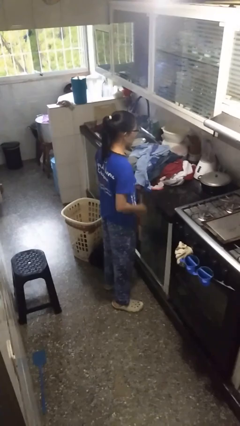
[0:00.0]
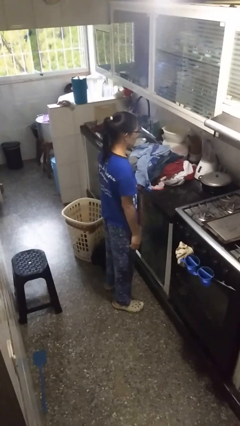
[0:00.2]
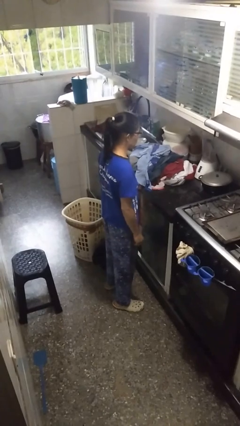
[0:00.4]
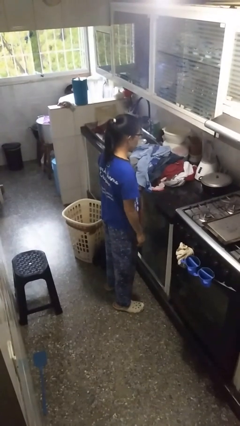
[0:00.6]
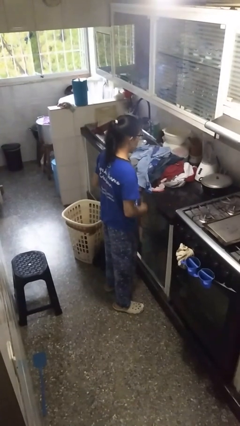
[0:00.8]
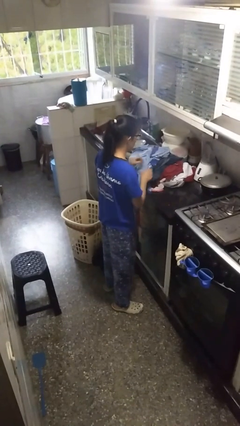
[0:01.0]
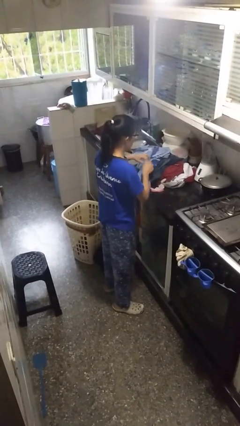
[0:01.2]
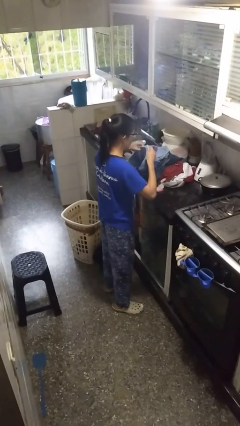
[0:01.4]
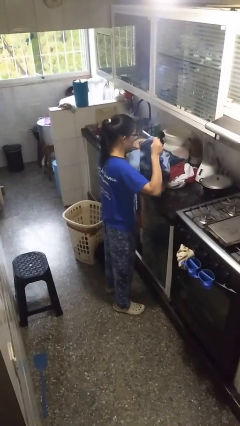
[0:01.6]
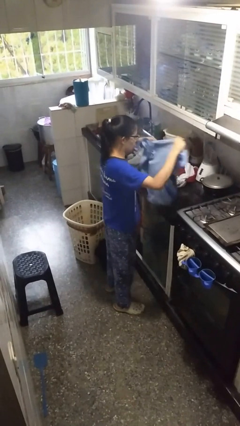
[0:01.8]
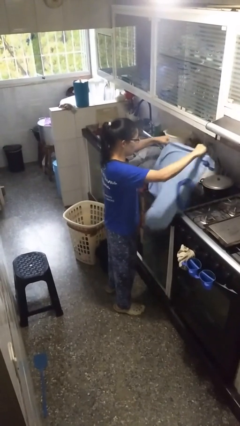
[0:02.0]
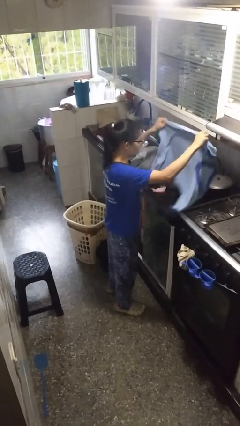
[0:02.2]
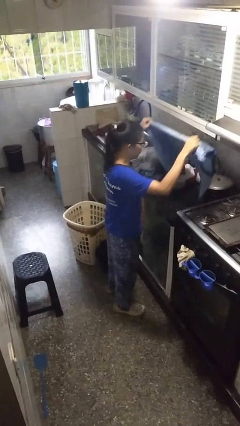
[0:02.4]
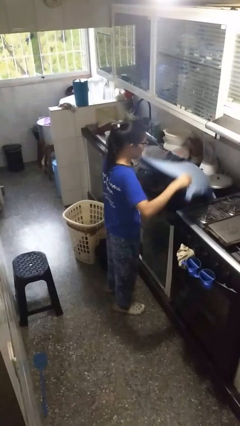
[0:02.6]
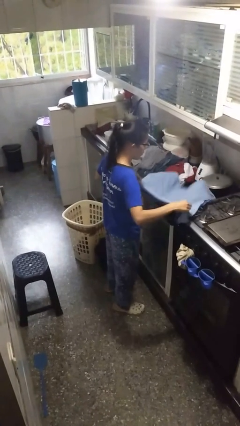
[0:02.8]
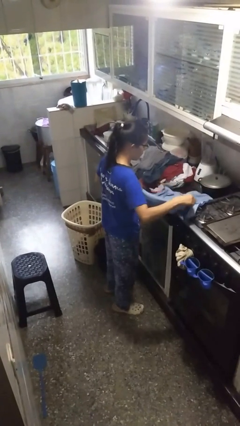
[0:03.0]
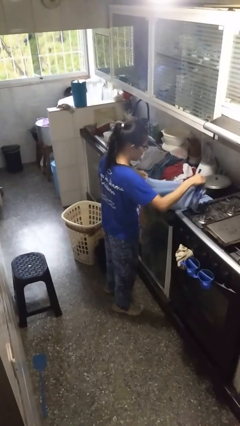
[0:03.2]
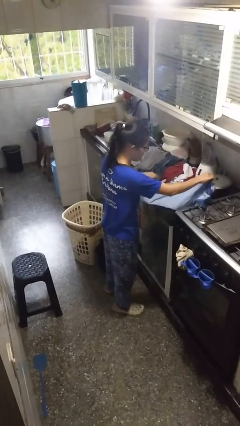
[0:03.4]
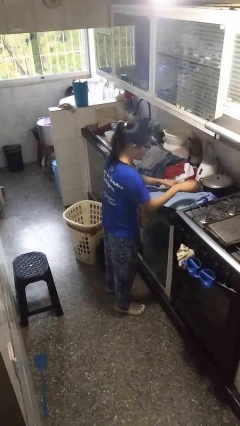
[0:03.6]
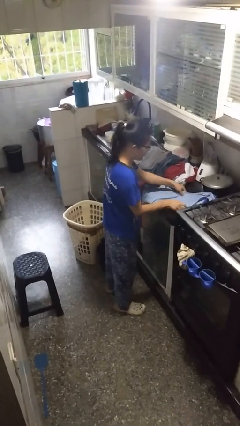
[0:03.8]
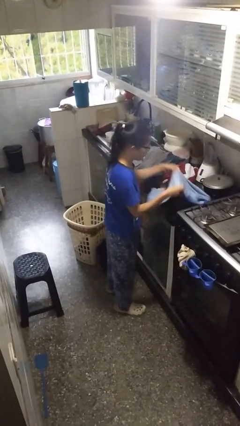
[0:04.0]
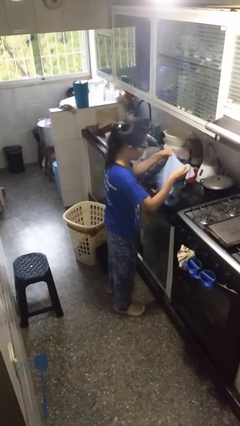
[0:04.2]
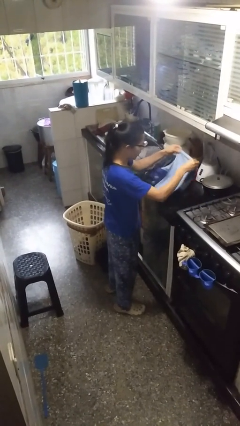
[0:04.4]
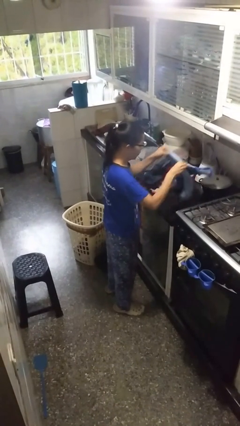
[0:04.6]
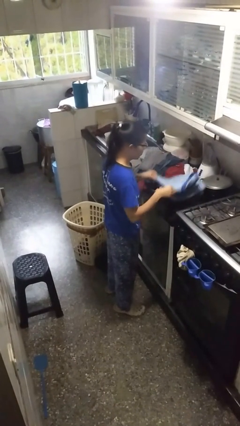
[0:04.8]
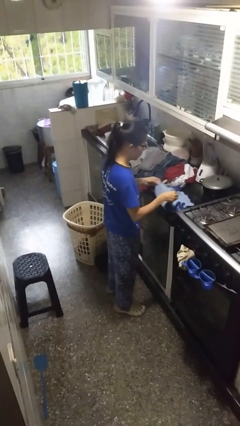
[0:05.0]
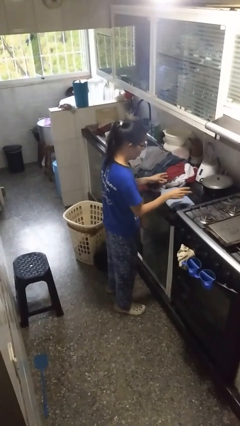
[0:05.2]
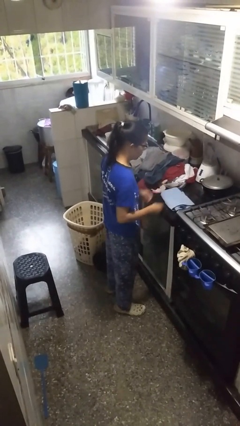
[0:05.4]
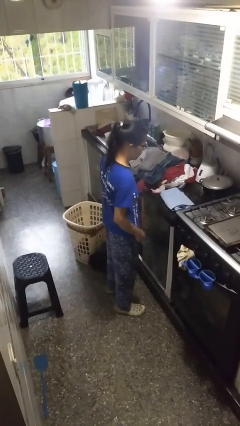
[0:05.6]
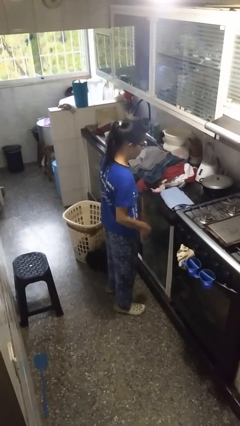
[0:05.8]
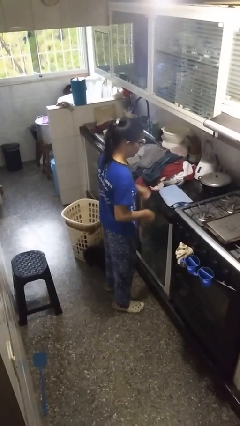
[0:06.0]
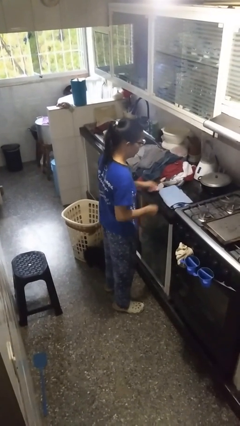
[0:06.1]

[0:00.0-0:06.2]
person folds shirt

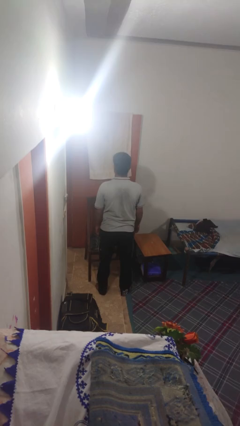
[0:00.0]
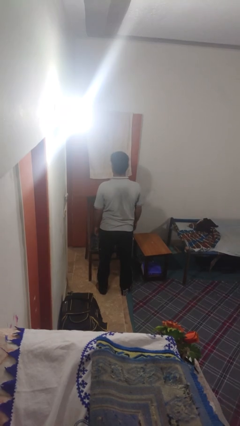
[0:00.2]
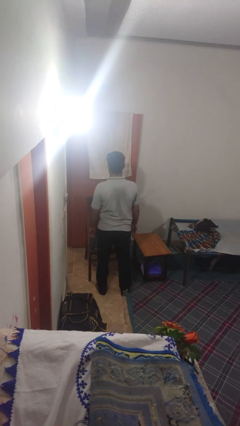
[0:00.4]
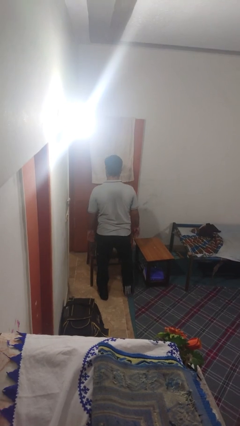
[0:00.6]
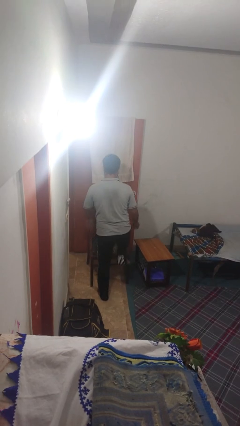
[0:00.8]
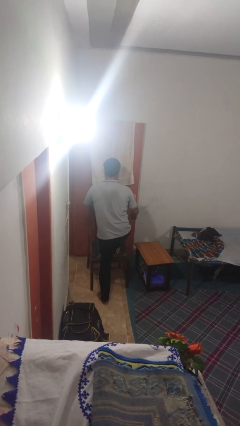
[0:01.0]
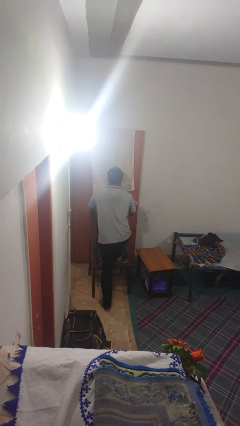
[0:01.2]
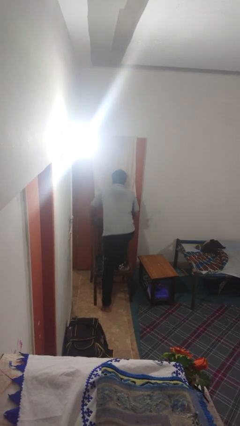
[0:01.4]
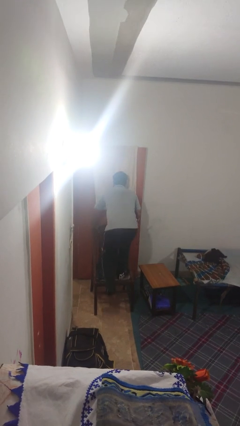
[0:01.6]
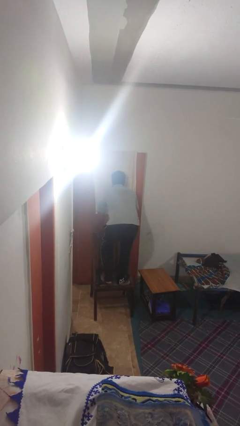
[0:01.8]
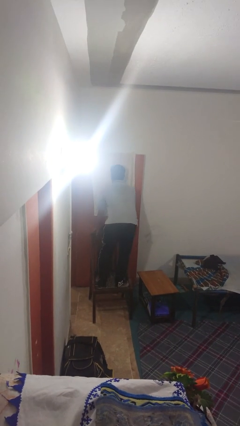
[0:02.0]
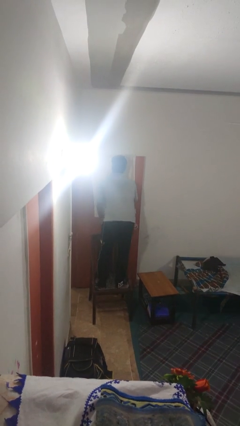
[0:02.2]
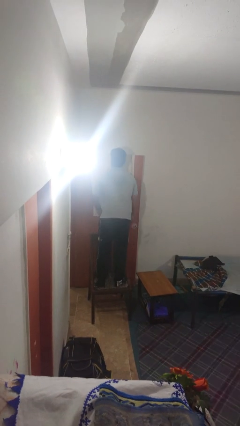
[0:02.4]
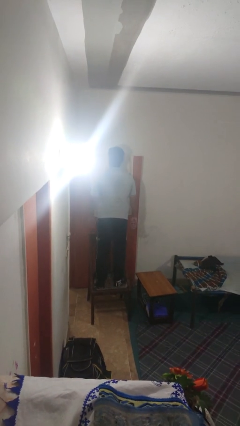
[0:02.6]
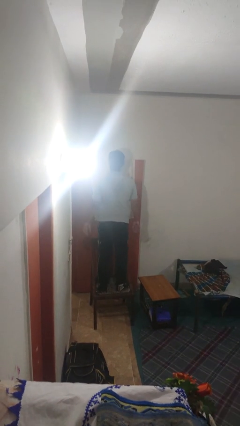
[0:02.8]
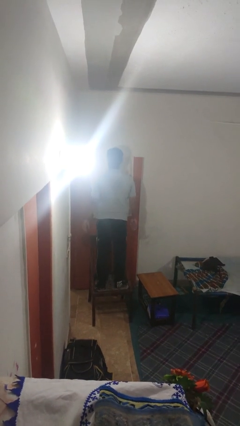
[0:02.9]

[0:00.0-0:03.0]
person climbs on chair

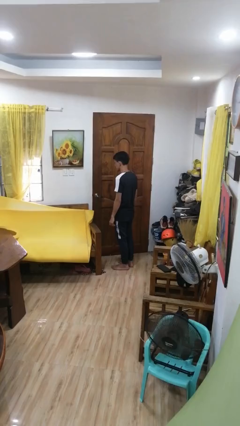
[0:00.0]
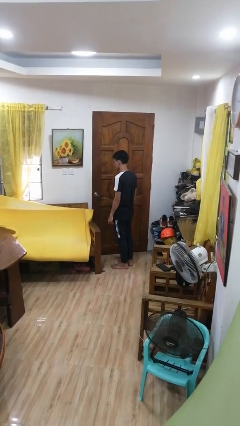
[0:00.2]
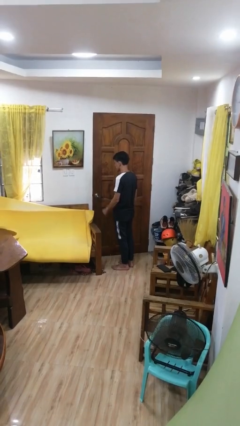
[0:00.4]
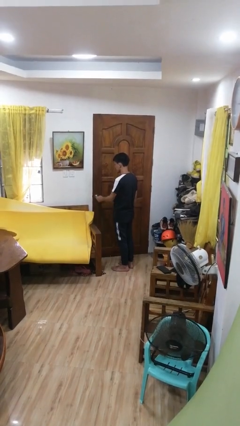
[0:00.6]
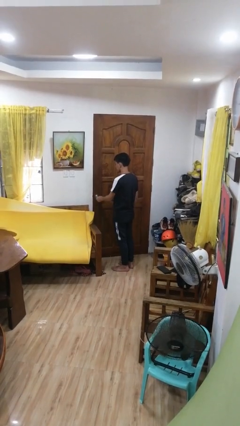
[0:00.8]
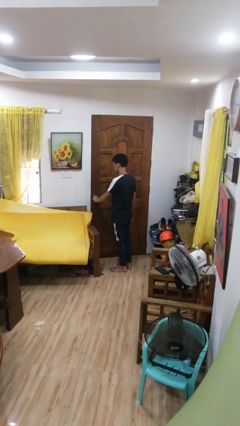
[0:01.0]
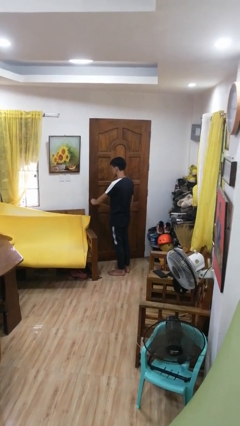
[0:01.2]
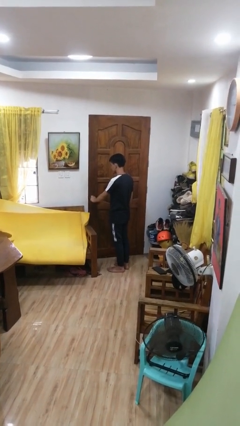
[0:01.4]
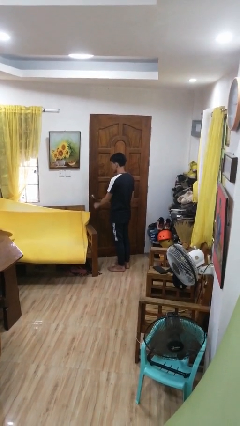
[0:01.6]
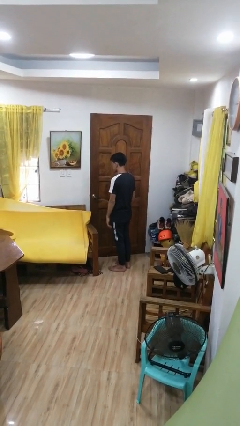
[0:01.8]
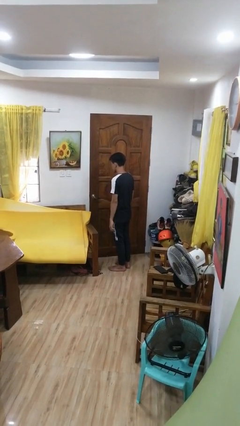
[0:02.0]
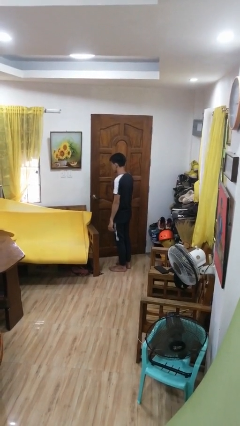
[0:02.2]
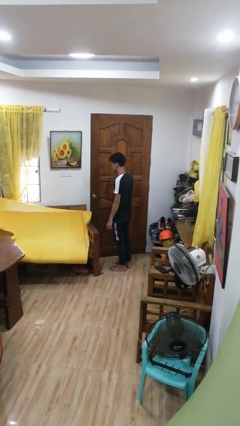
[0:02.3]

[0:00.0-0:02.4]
person unlocks door with keys

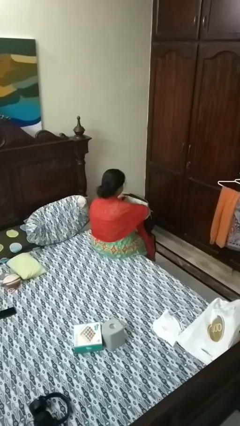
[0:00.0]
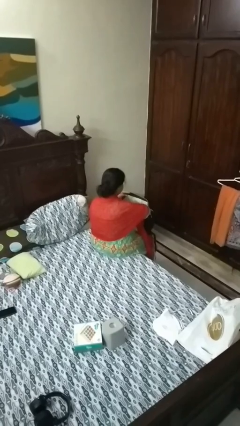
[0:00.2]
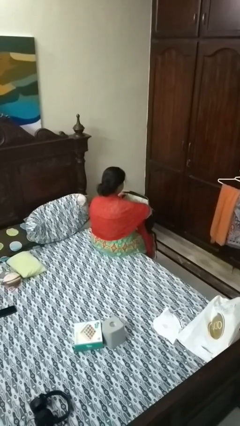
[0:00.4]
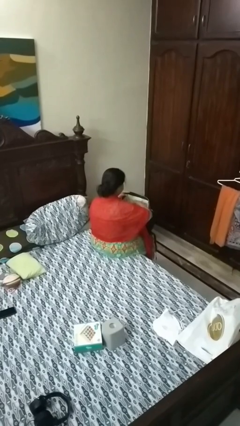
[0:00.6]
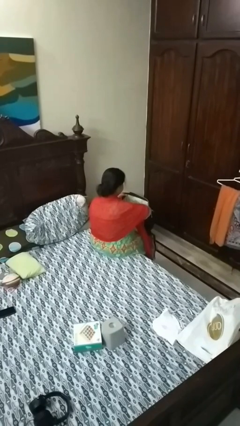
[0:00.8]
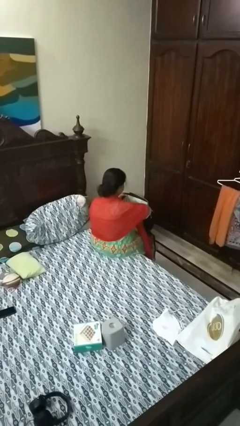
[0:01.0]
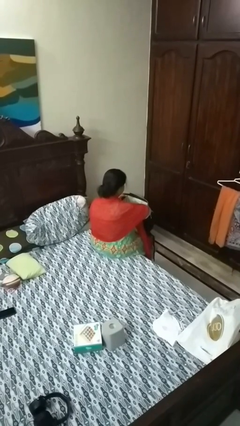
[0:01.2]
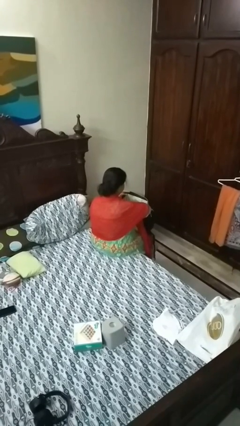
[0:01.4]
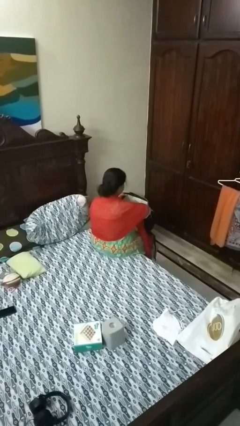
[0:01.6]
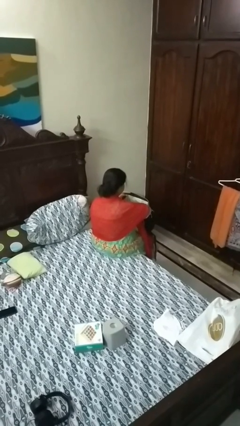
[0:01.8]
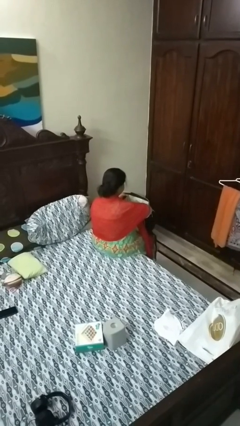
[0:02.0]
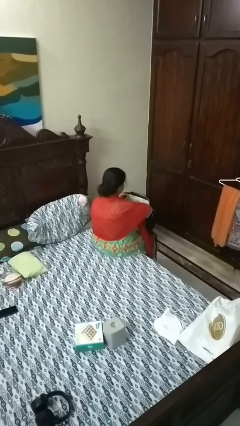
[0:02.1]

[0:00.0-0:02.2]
person searches in backpack

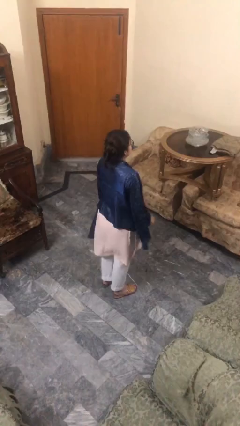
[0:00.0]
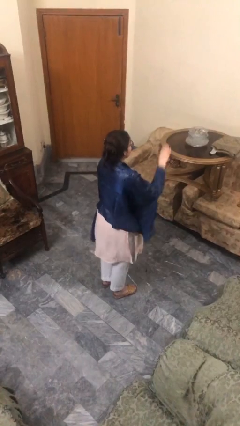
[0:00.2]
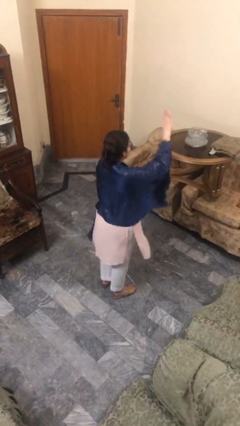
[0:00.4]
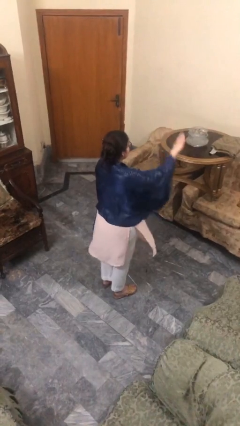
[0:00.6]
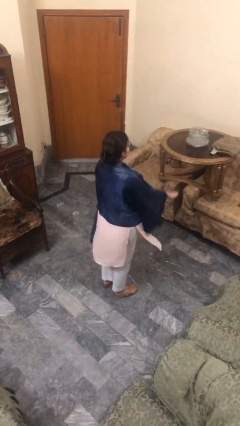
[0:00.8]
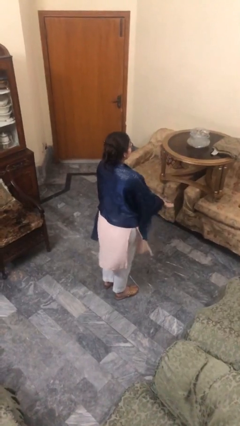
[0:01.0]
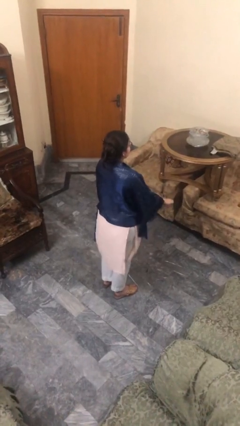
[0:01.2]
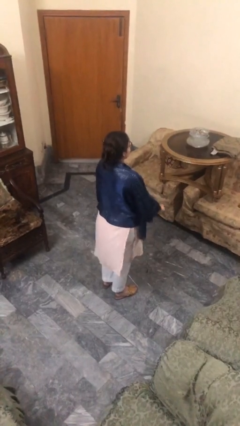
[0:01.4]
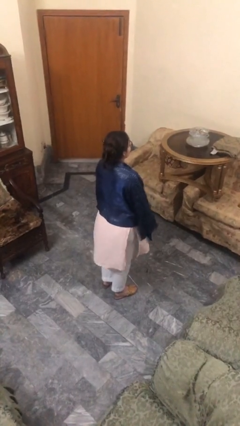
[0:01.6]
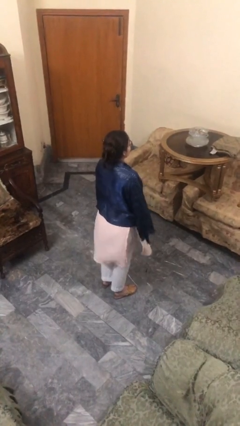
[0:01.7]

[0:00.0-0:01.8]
person gestures swipe down

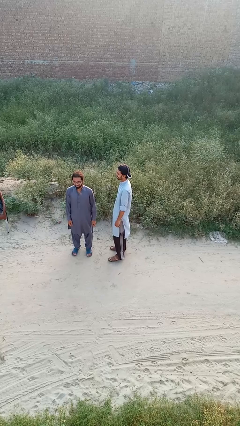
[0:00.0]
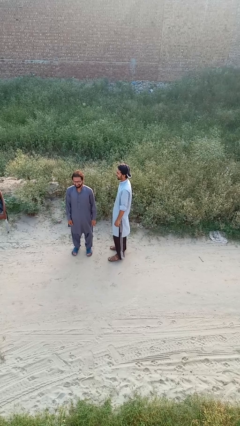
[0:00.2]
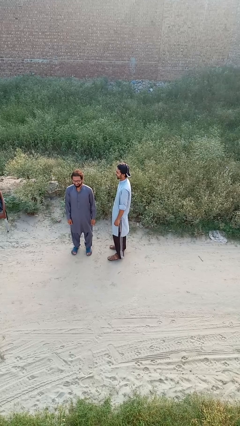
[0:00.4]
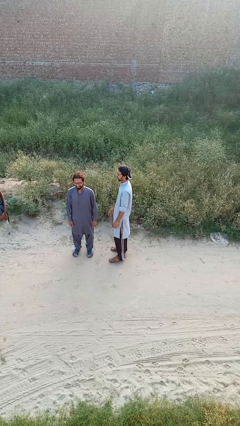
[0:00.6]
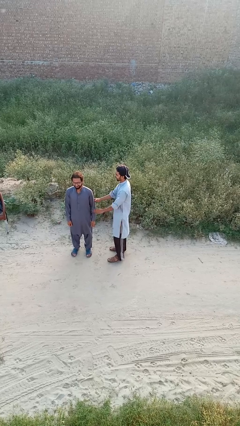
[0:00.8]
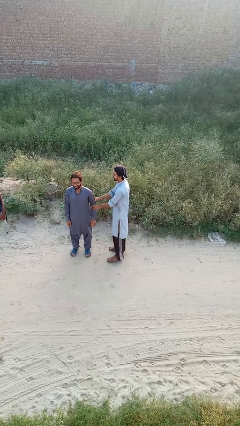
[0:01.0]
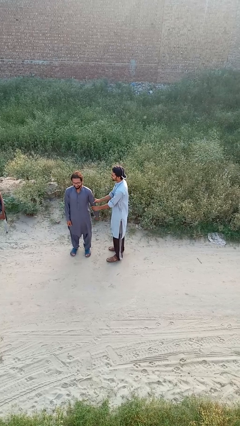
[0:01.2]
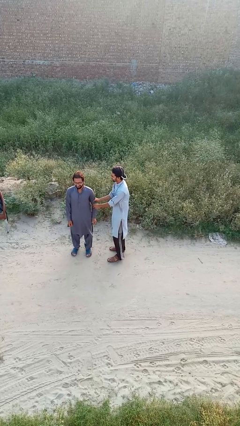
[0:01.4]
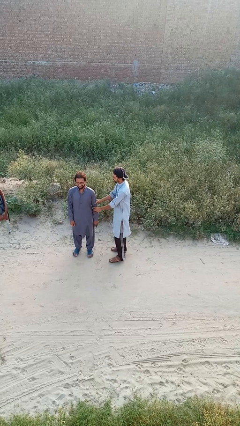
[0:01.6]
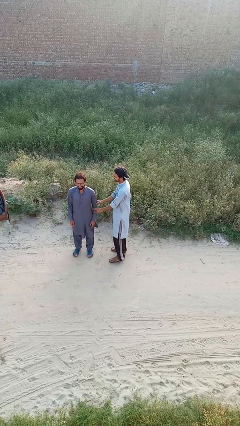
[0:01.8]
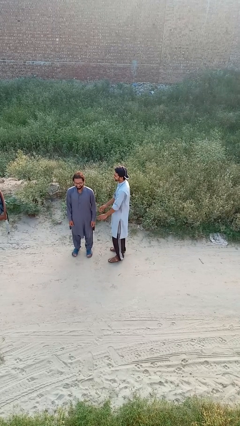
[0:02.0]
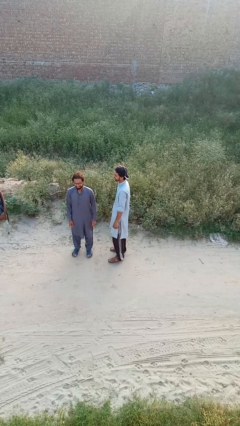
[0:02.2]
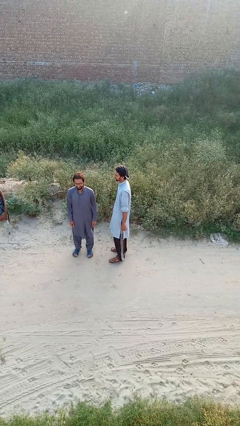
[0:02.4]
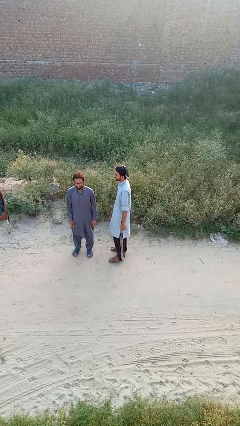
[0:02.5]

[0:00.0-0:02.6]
person grabs person by forearm
